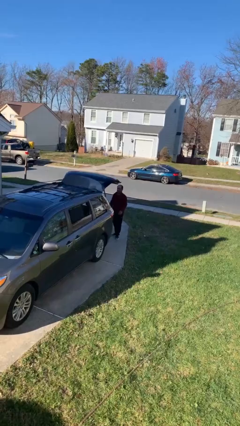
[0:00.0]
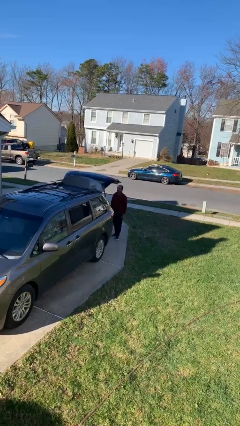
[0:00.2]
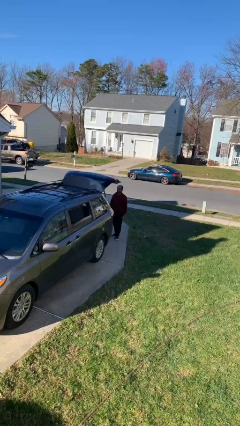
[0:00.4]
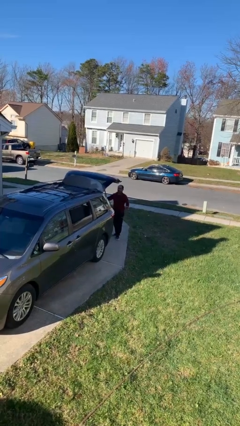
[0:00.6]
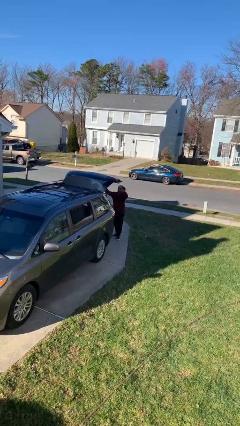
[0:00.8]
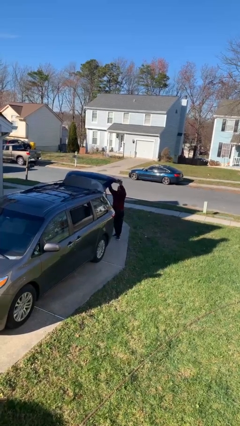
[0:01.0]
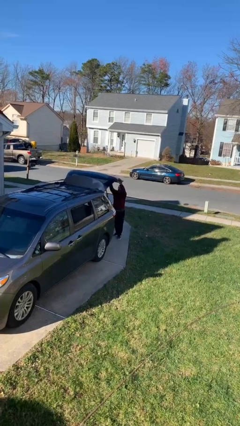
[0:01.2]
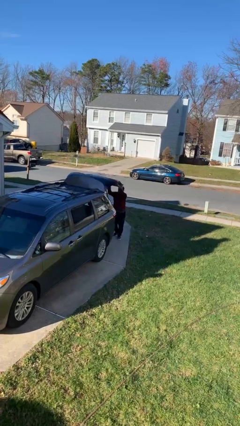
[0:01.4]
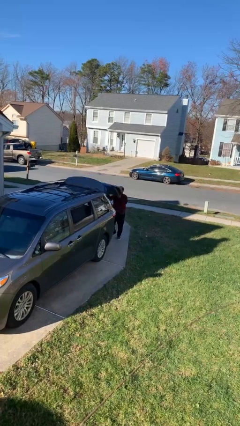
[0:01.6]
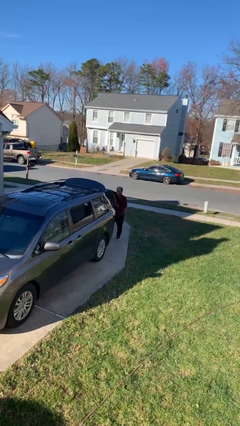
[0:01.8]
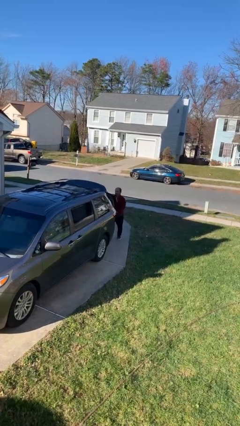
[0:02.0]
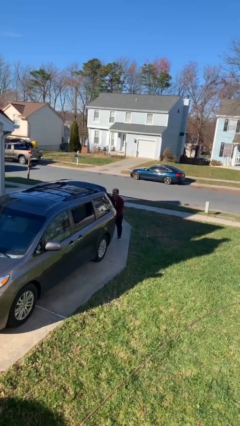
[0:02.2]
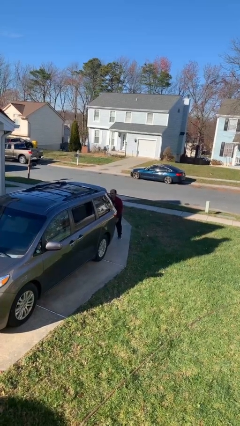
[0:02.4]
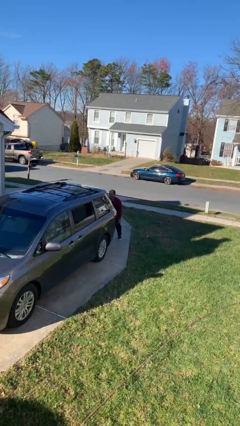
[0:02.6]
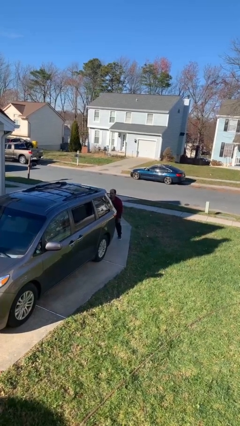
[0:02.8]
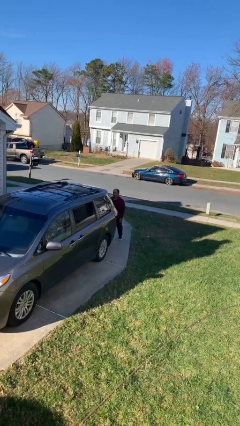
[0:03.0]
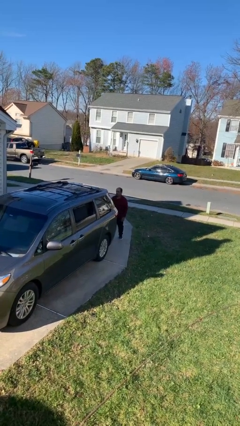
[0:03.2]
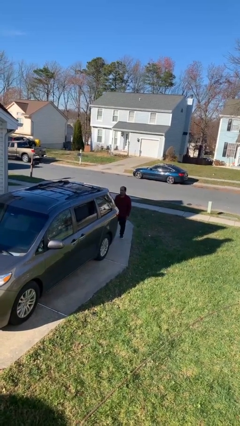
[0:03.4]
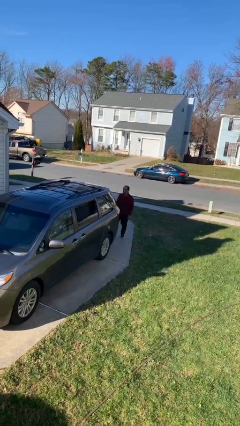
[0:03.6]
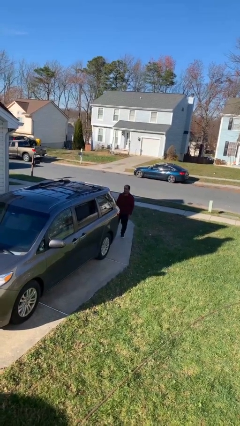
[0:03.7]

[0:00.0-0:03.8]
person closes car trunk

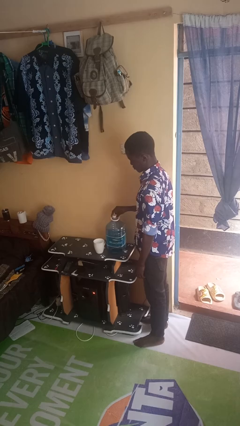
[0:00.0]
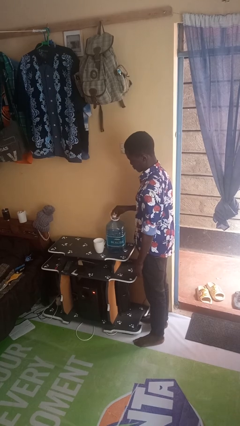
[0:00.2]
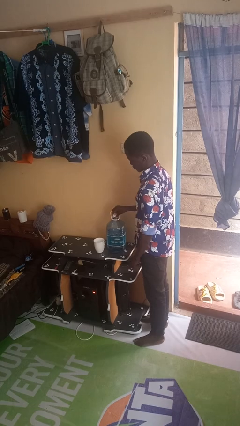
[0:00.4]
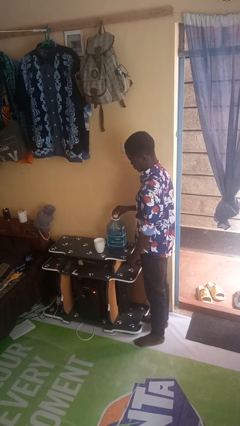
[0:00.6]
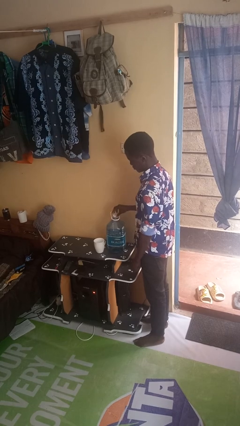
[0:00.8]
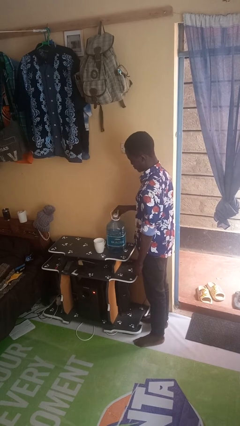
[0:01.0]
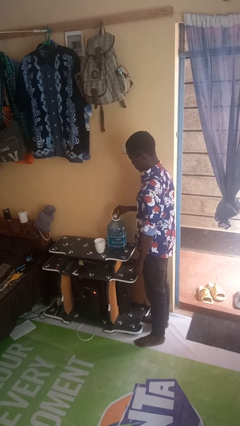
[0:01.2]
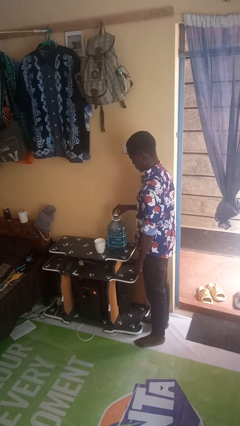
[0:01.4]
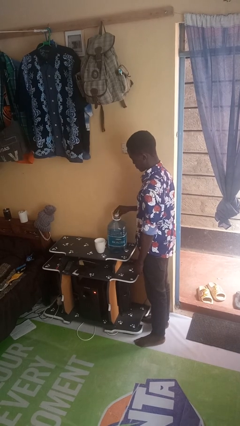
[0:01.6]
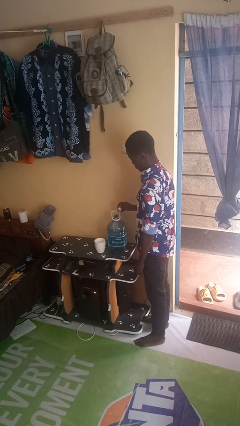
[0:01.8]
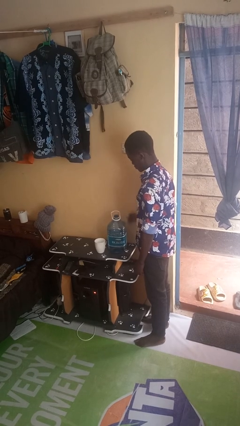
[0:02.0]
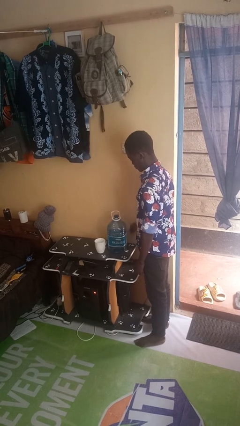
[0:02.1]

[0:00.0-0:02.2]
person unscrews lid from bottle

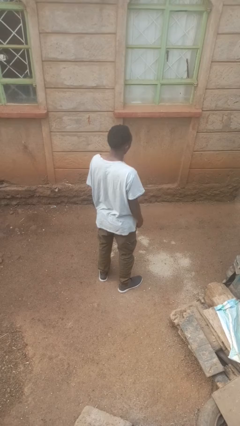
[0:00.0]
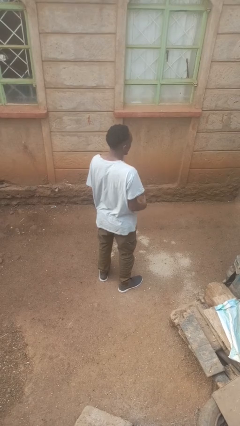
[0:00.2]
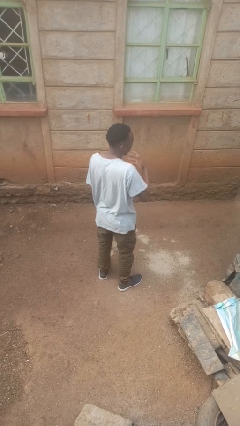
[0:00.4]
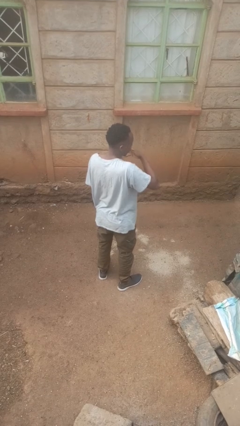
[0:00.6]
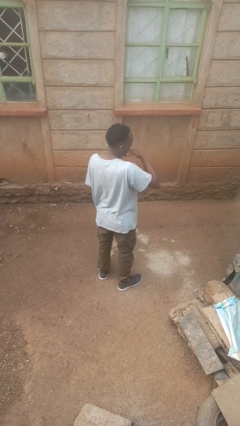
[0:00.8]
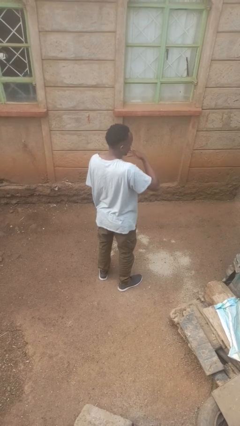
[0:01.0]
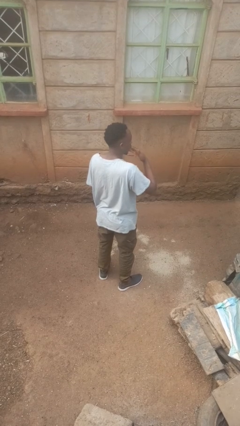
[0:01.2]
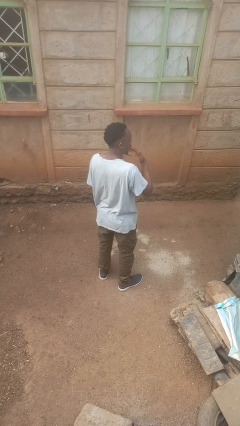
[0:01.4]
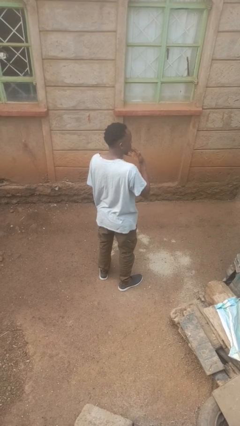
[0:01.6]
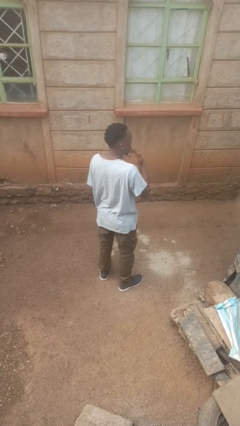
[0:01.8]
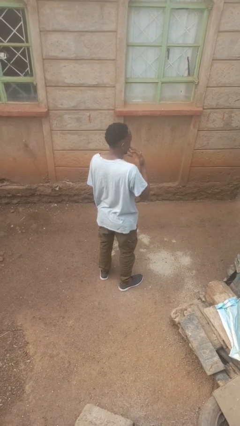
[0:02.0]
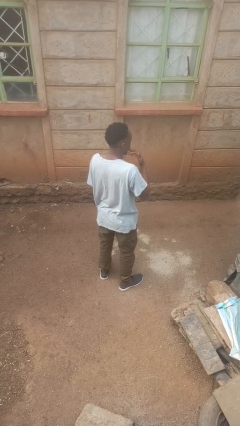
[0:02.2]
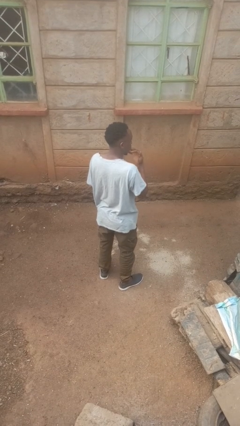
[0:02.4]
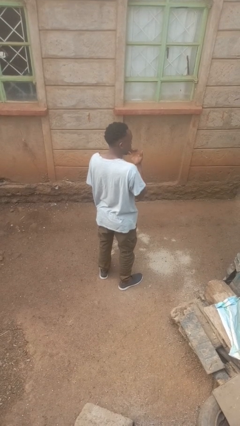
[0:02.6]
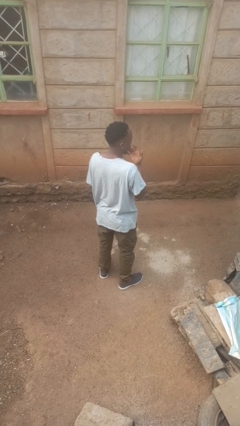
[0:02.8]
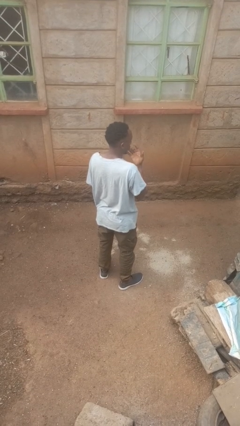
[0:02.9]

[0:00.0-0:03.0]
person licks fingers

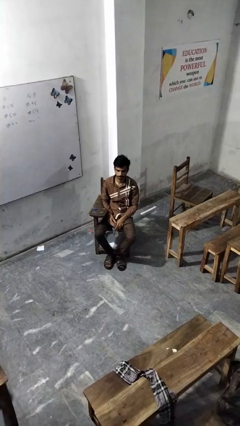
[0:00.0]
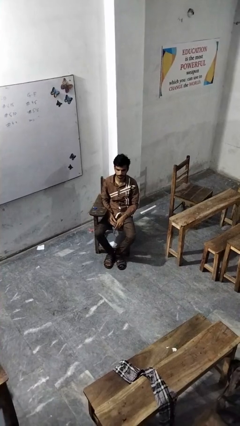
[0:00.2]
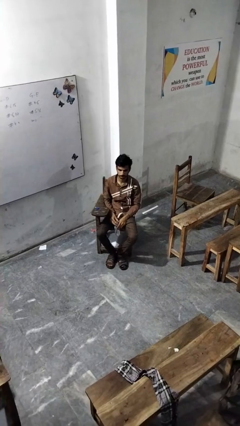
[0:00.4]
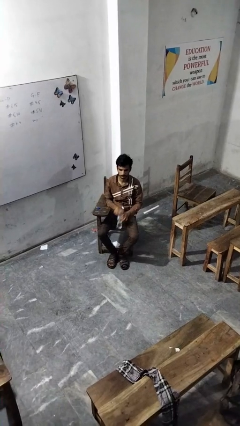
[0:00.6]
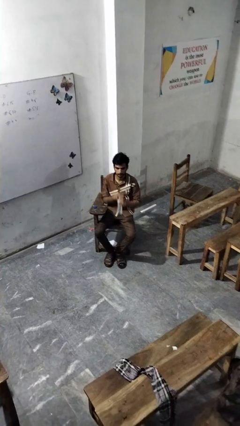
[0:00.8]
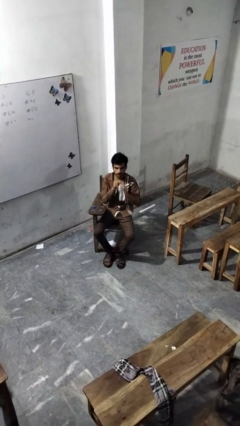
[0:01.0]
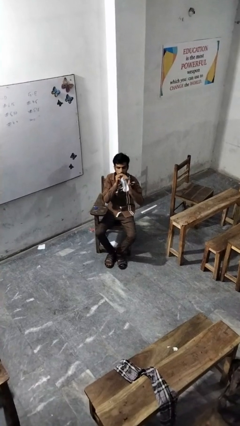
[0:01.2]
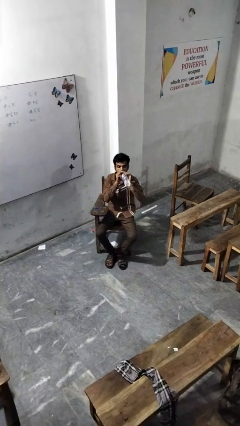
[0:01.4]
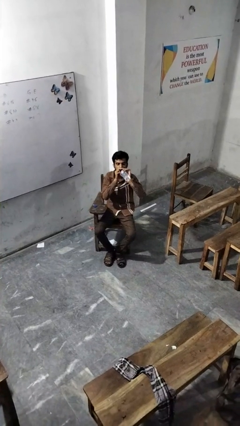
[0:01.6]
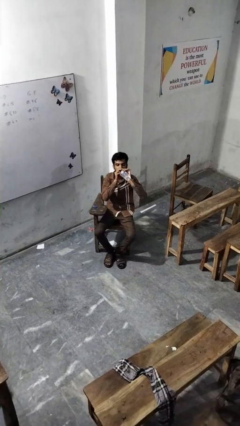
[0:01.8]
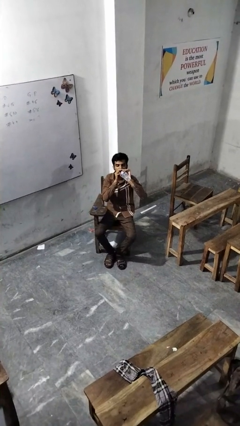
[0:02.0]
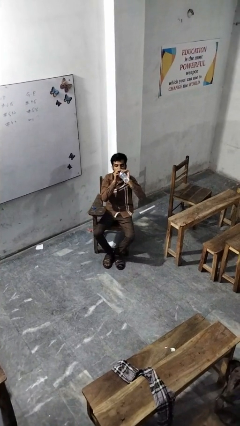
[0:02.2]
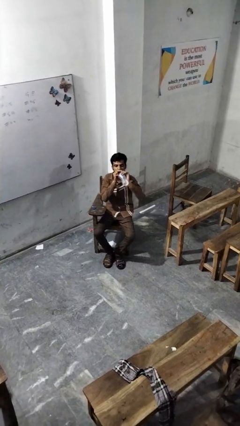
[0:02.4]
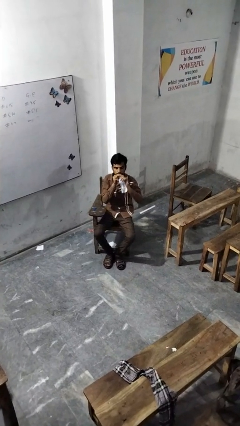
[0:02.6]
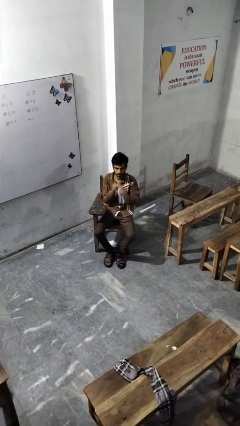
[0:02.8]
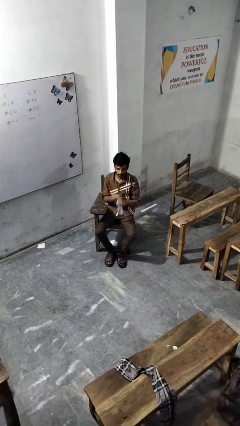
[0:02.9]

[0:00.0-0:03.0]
person drinks from bottle

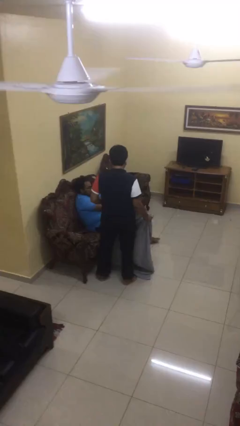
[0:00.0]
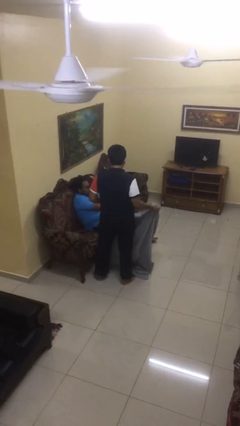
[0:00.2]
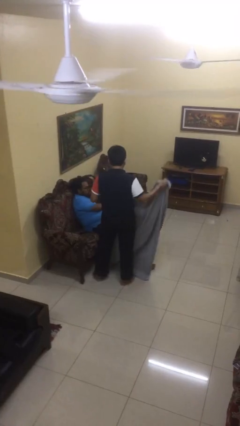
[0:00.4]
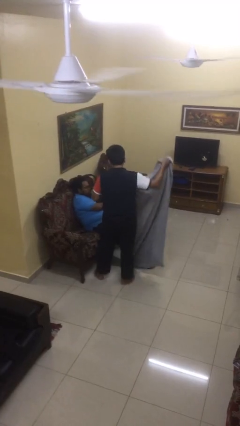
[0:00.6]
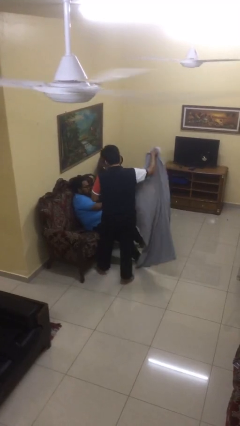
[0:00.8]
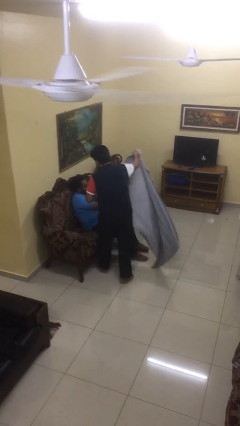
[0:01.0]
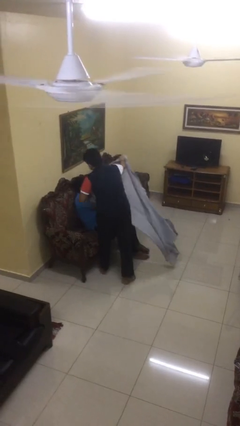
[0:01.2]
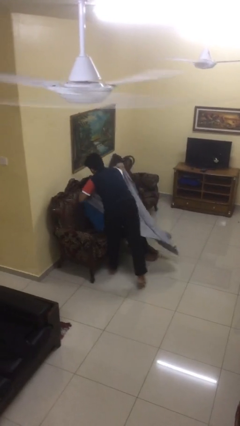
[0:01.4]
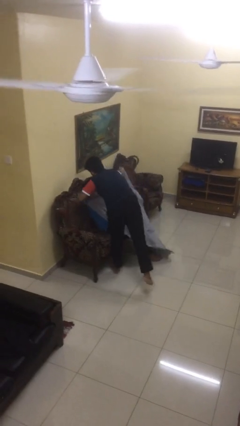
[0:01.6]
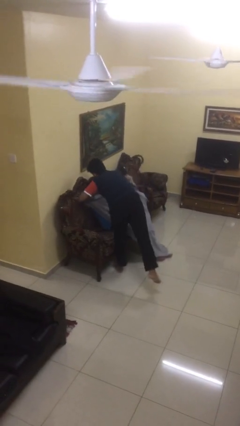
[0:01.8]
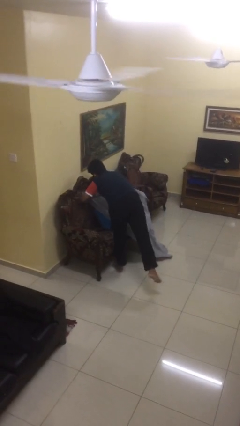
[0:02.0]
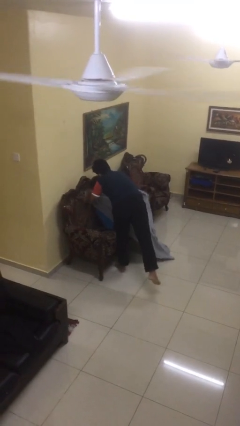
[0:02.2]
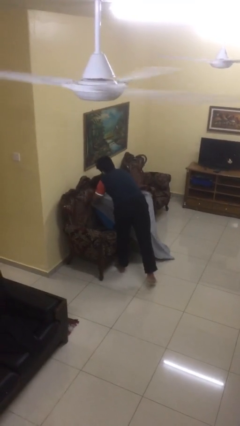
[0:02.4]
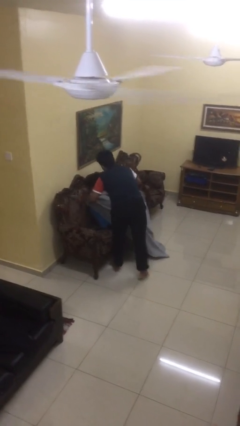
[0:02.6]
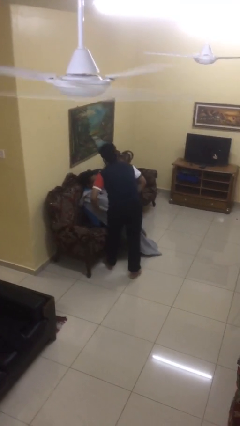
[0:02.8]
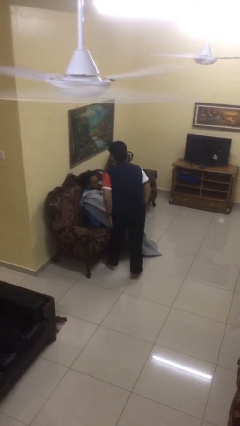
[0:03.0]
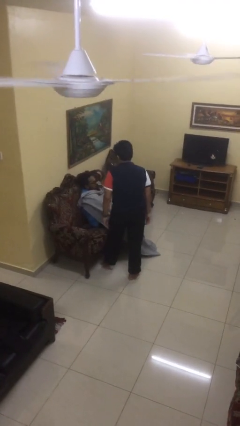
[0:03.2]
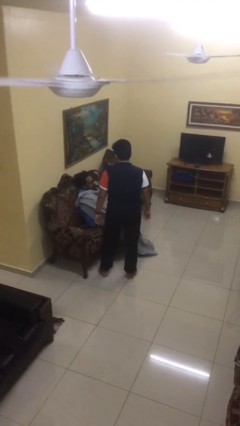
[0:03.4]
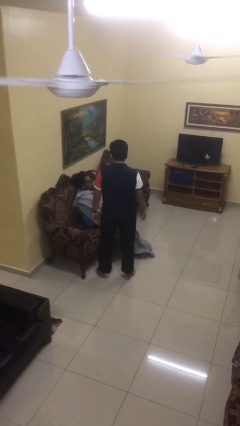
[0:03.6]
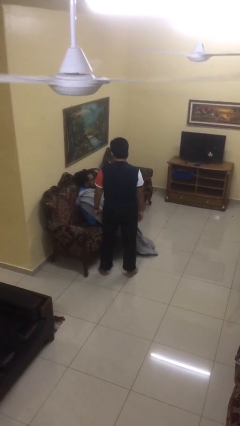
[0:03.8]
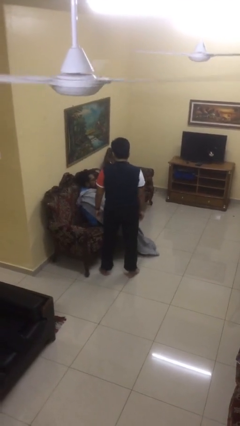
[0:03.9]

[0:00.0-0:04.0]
person covers friend with blanket

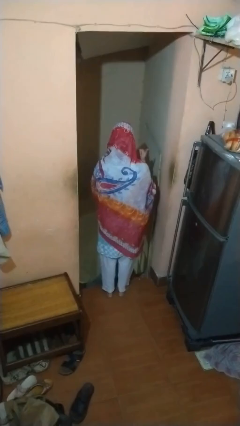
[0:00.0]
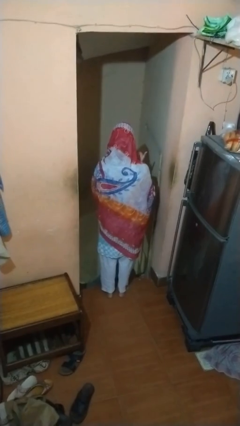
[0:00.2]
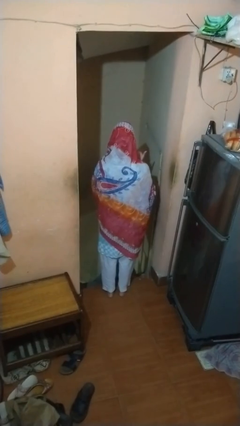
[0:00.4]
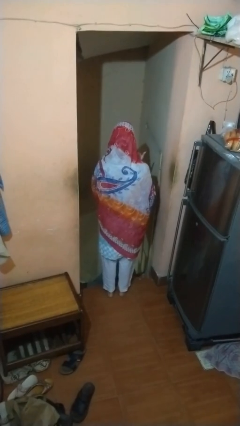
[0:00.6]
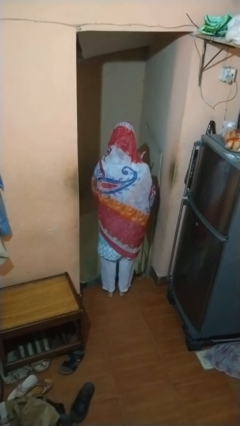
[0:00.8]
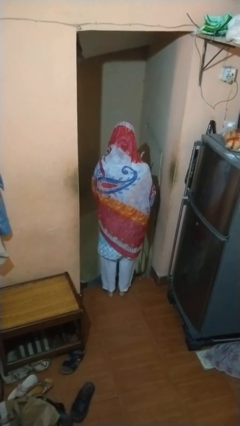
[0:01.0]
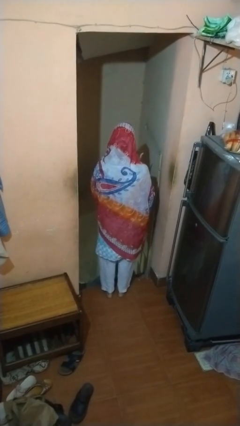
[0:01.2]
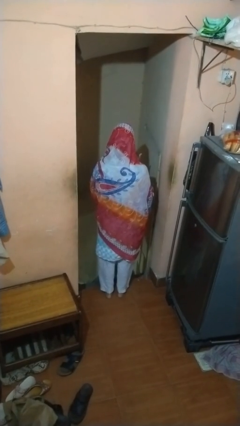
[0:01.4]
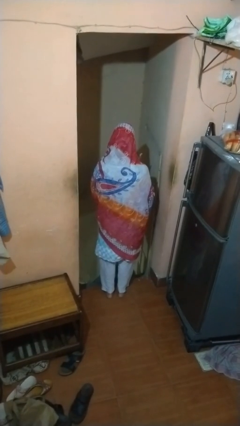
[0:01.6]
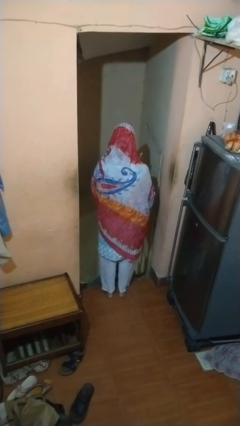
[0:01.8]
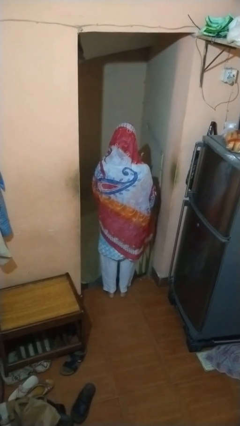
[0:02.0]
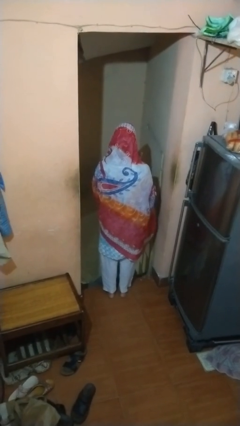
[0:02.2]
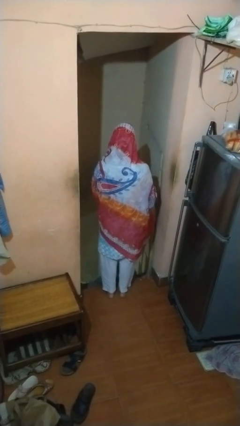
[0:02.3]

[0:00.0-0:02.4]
person gestures hang loose
